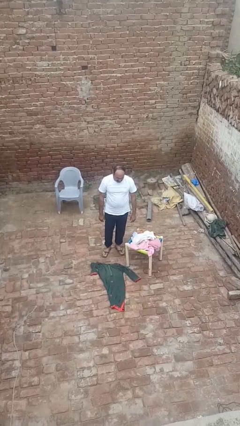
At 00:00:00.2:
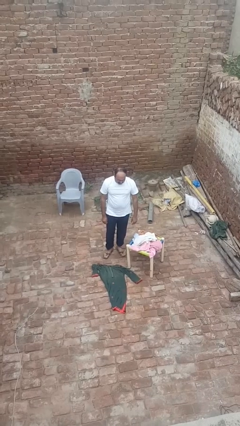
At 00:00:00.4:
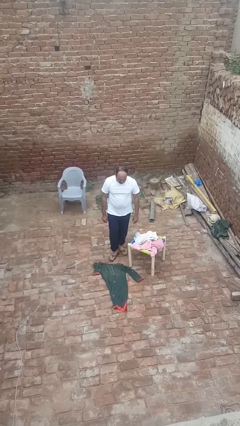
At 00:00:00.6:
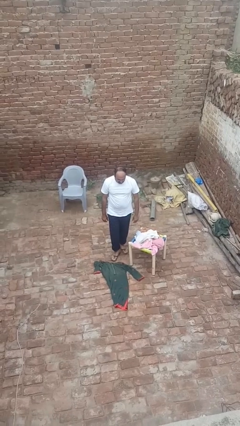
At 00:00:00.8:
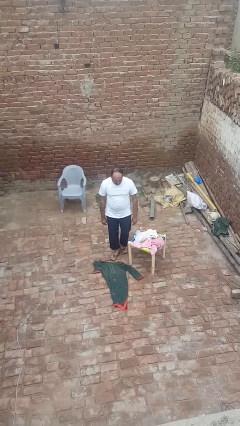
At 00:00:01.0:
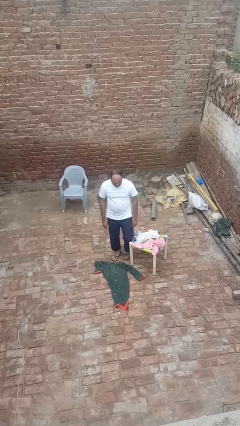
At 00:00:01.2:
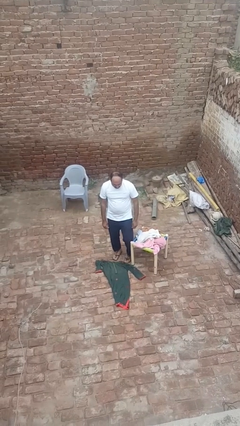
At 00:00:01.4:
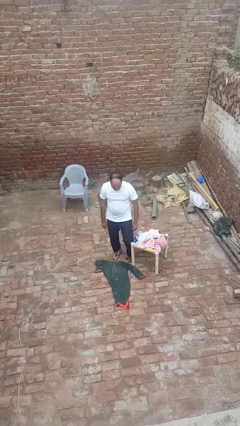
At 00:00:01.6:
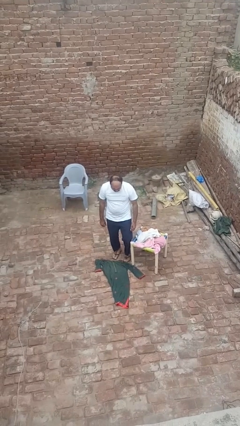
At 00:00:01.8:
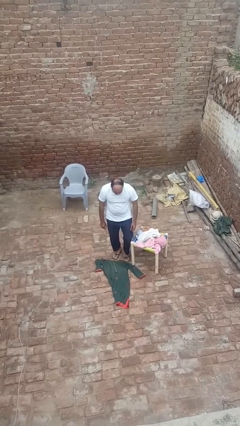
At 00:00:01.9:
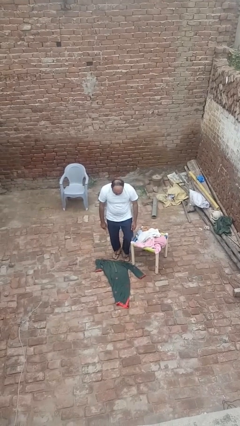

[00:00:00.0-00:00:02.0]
person trips on object on floor

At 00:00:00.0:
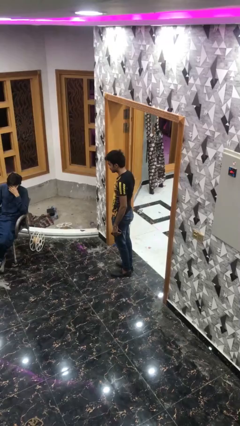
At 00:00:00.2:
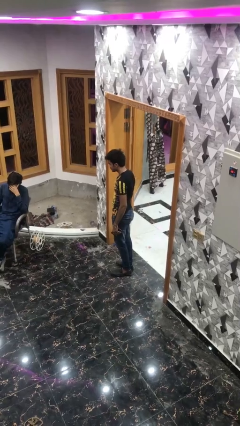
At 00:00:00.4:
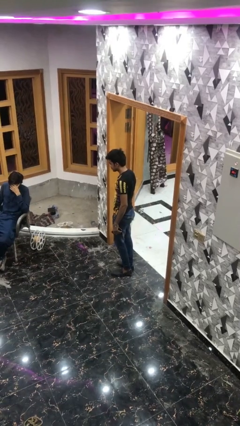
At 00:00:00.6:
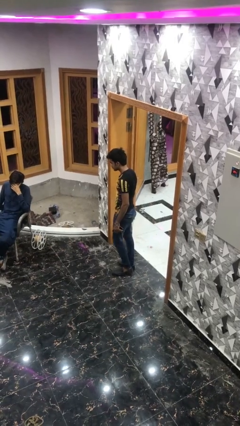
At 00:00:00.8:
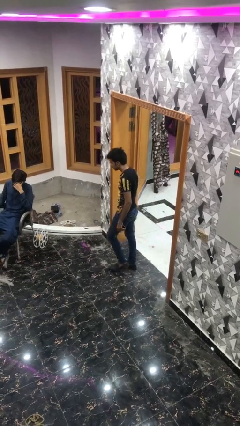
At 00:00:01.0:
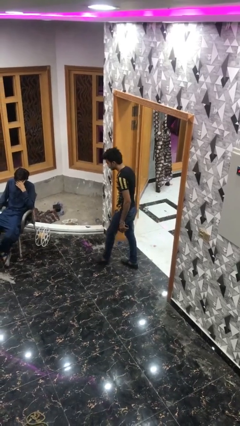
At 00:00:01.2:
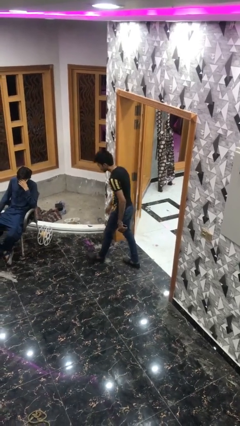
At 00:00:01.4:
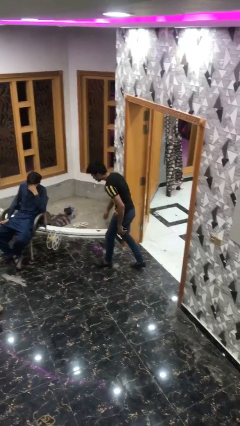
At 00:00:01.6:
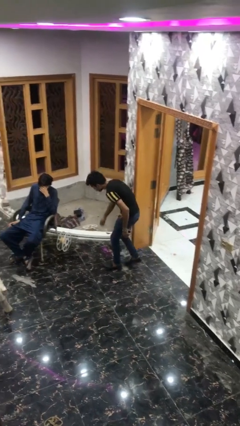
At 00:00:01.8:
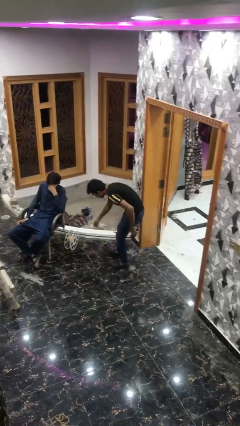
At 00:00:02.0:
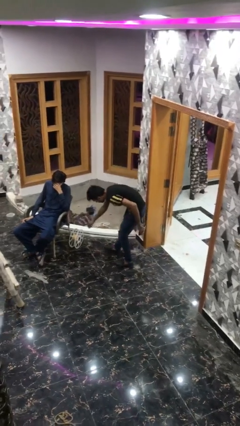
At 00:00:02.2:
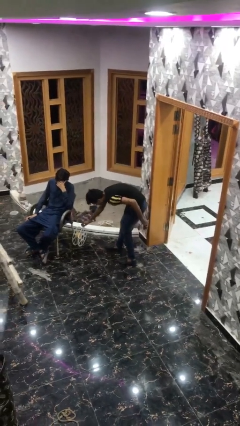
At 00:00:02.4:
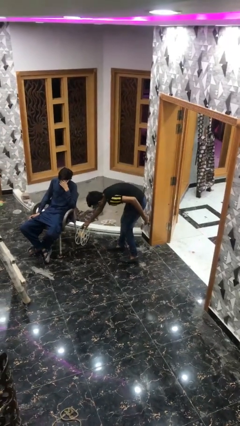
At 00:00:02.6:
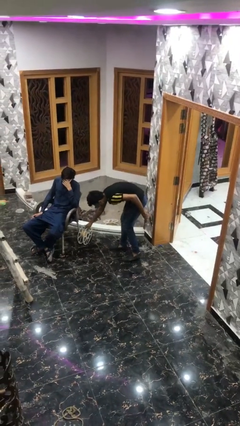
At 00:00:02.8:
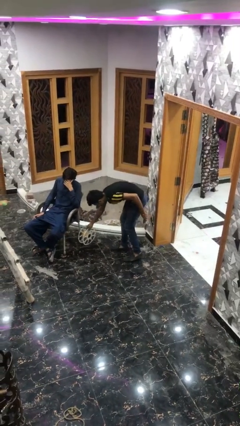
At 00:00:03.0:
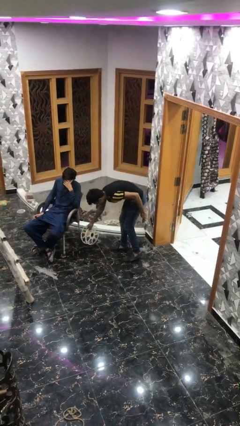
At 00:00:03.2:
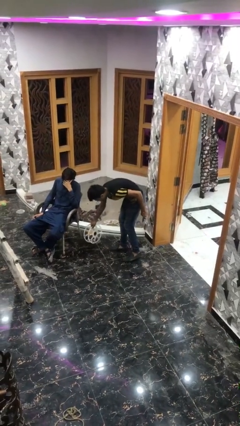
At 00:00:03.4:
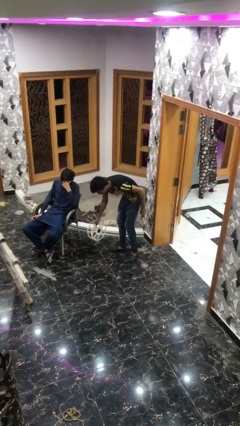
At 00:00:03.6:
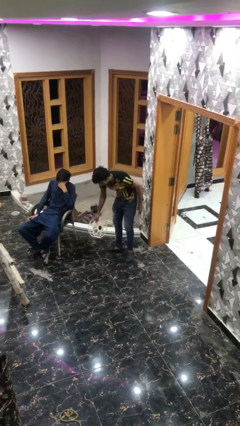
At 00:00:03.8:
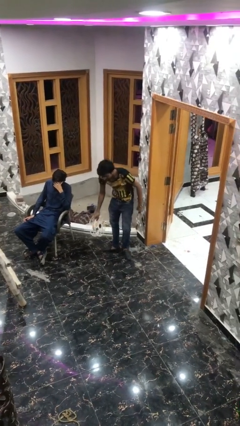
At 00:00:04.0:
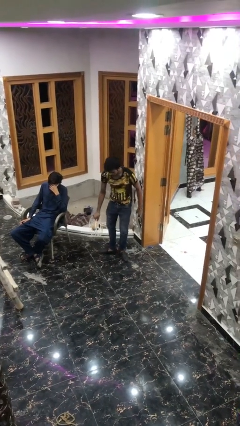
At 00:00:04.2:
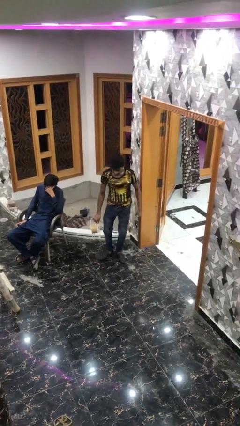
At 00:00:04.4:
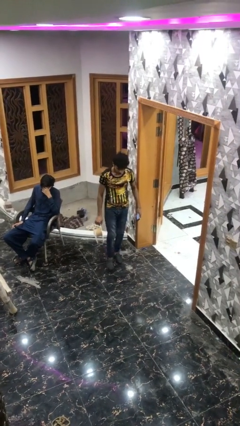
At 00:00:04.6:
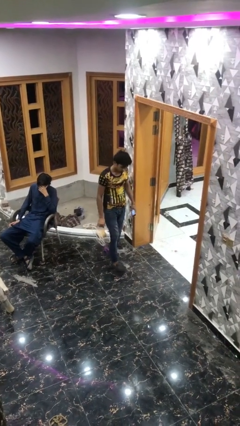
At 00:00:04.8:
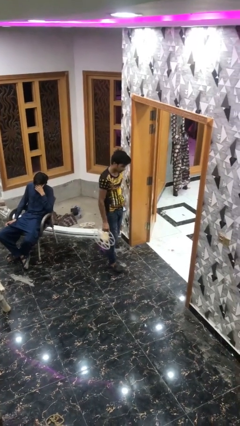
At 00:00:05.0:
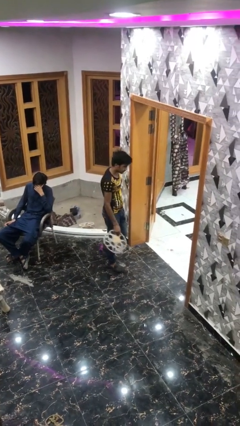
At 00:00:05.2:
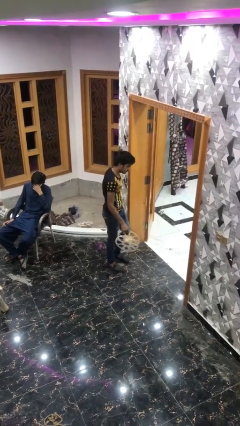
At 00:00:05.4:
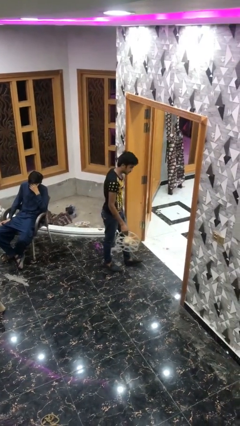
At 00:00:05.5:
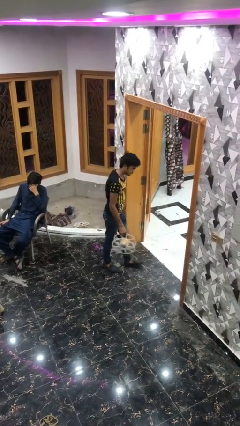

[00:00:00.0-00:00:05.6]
person steals object from person

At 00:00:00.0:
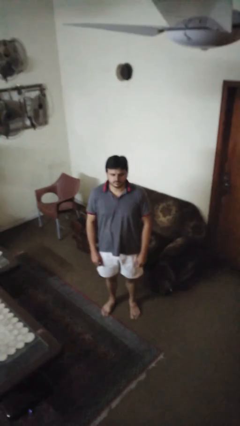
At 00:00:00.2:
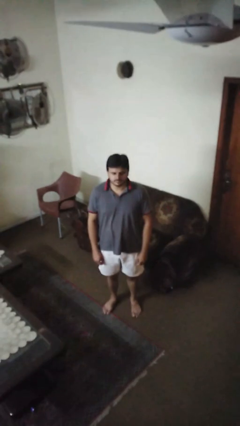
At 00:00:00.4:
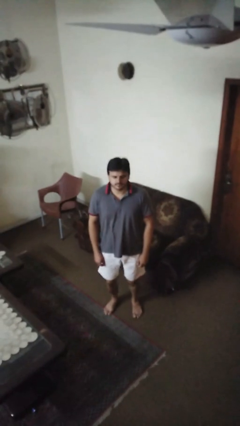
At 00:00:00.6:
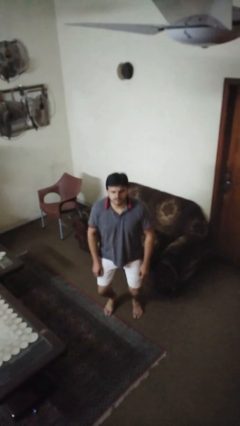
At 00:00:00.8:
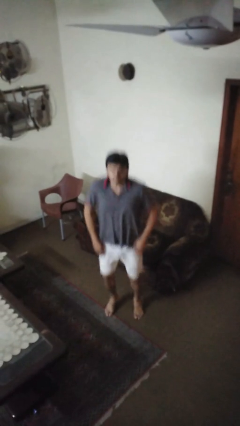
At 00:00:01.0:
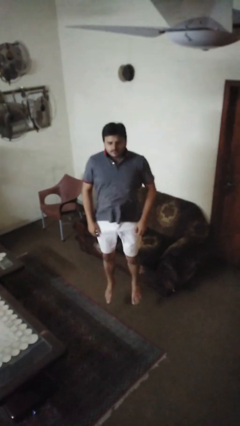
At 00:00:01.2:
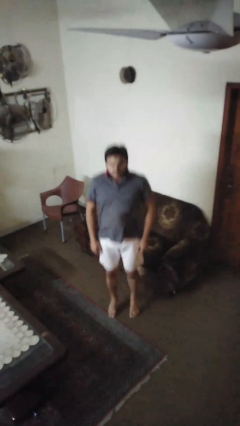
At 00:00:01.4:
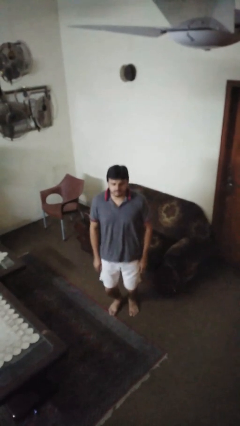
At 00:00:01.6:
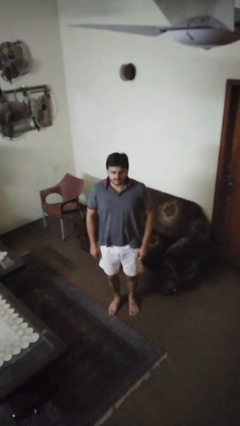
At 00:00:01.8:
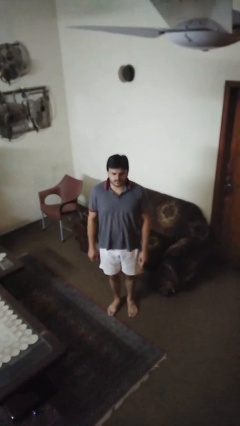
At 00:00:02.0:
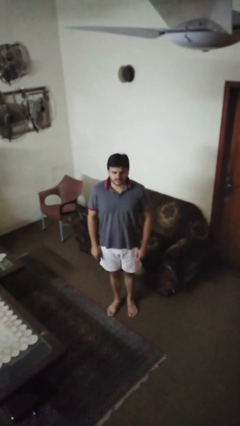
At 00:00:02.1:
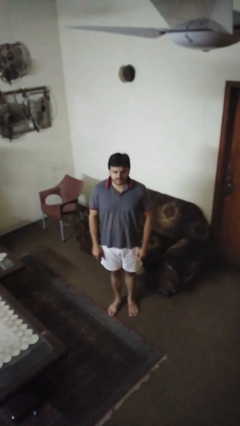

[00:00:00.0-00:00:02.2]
person jumps

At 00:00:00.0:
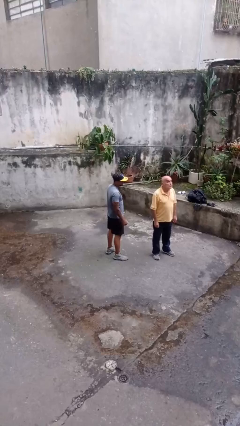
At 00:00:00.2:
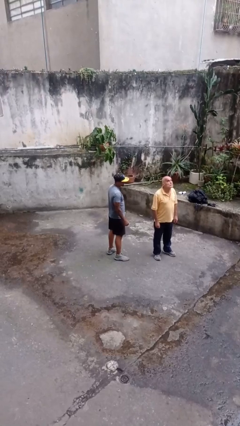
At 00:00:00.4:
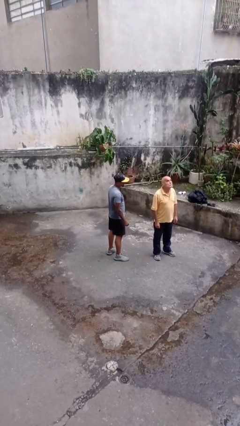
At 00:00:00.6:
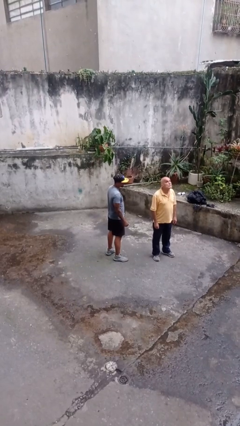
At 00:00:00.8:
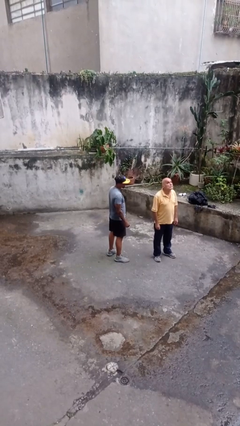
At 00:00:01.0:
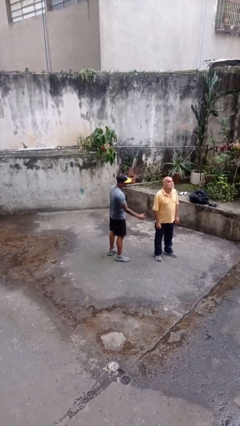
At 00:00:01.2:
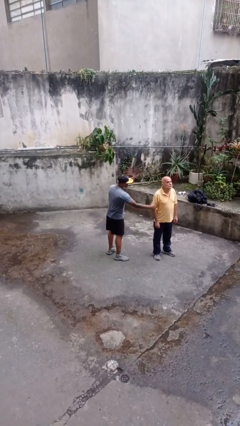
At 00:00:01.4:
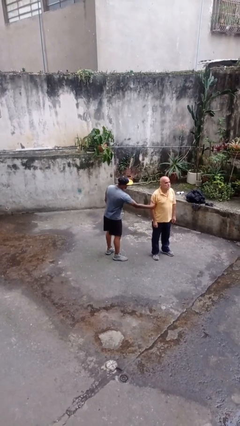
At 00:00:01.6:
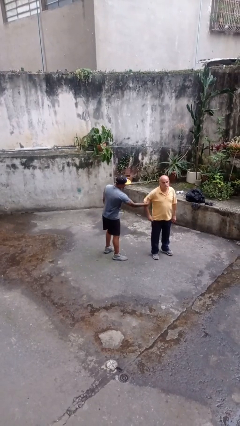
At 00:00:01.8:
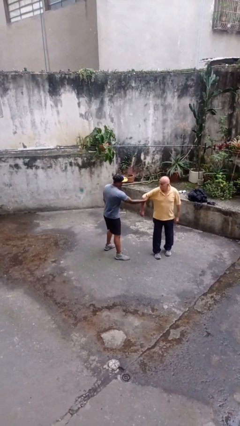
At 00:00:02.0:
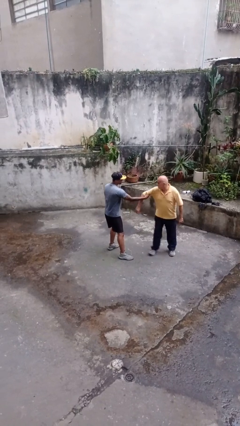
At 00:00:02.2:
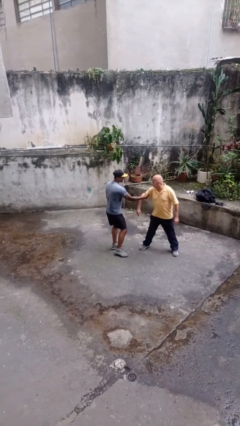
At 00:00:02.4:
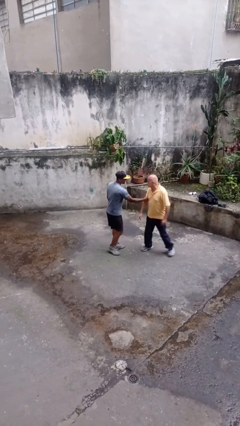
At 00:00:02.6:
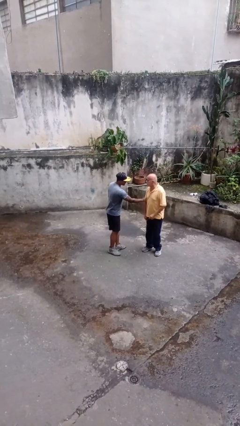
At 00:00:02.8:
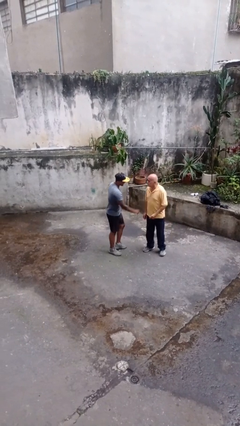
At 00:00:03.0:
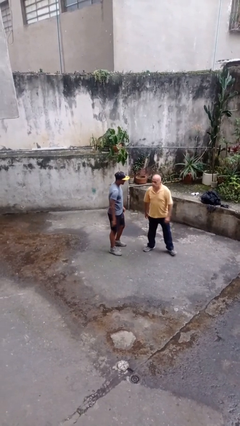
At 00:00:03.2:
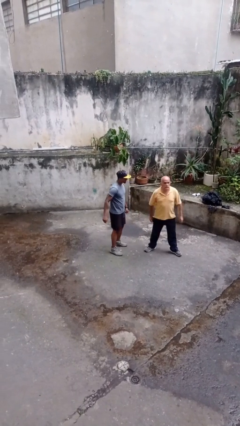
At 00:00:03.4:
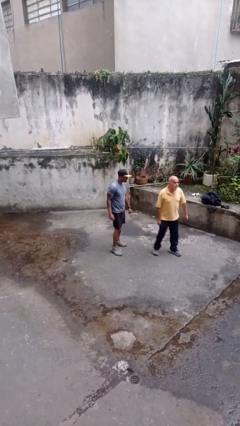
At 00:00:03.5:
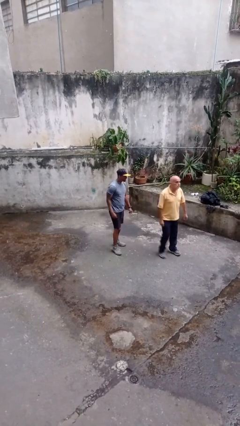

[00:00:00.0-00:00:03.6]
person grabs person by bicep

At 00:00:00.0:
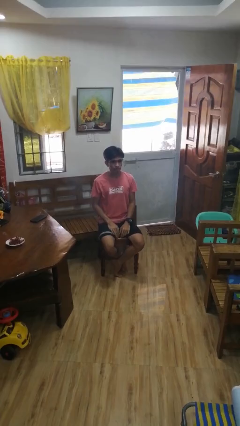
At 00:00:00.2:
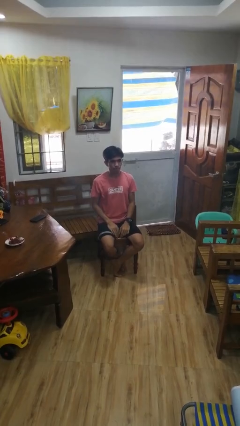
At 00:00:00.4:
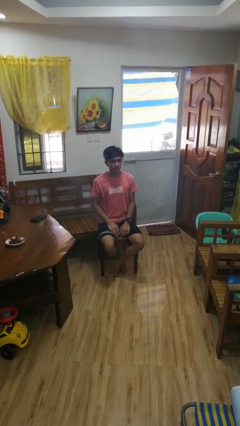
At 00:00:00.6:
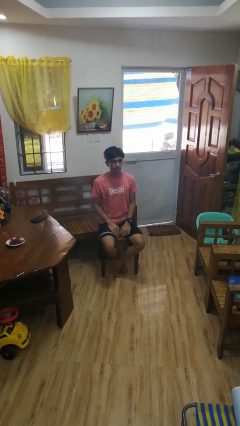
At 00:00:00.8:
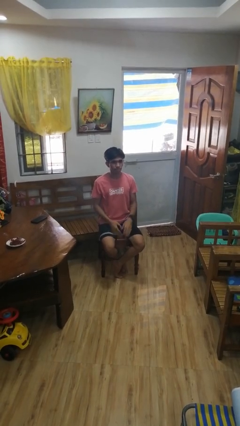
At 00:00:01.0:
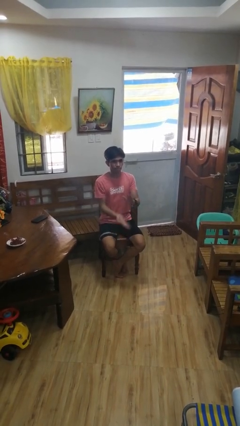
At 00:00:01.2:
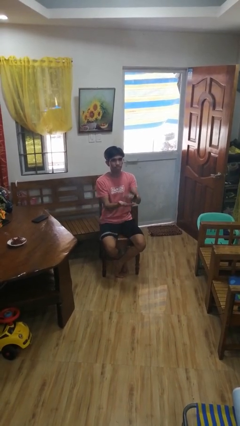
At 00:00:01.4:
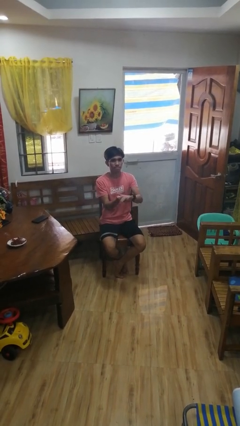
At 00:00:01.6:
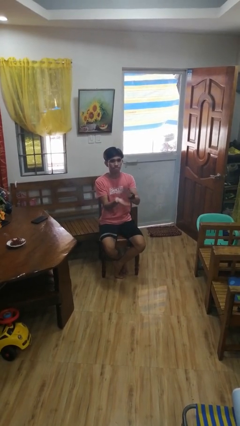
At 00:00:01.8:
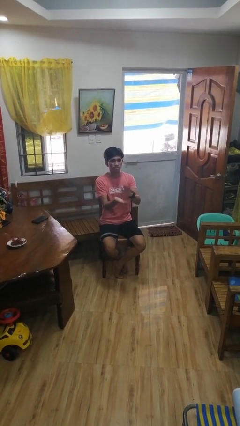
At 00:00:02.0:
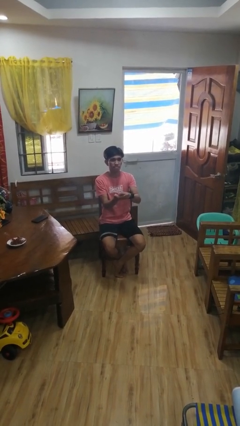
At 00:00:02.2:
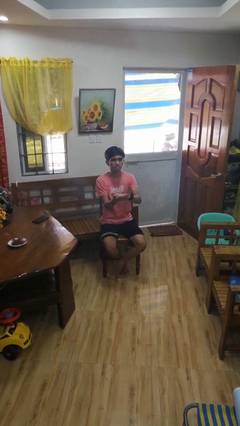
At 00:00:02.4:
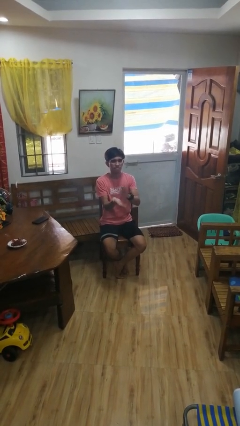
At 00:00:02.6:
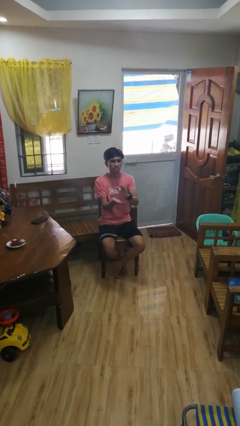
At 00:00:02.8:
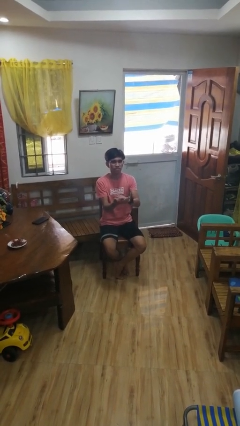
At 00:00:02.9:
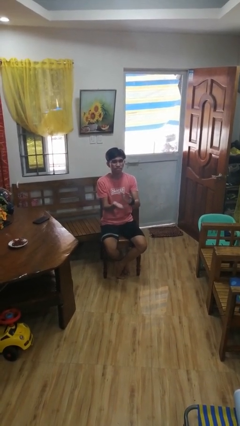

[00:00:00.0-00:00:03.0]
person claps hands

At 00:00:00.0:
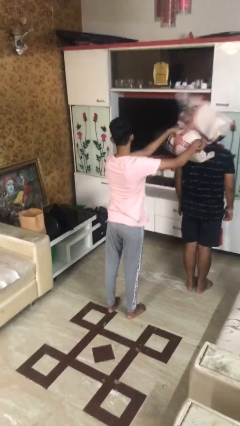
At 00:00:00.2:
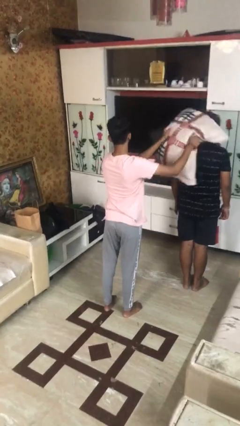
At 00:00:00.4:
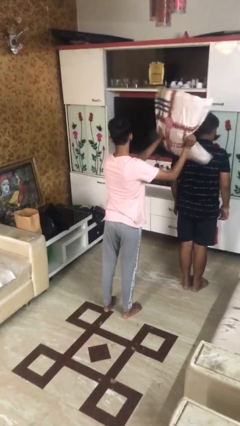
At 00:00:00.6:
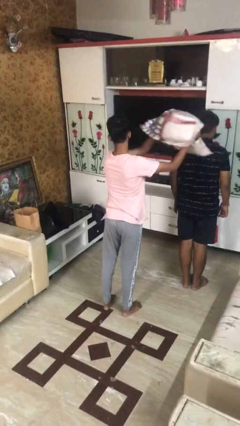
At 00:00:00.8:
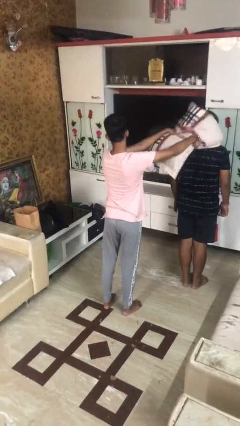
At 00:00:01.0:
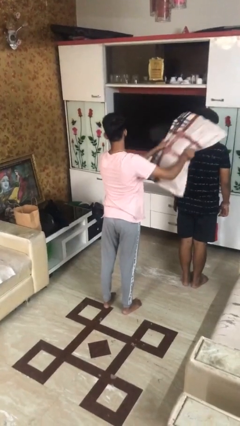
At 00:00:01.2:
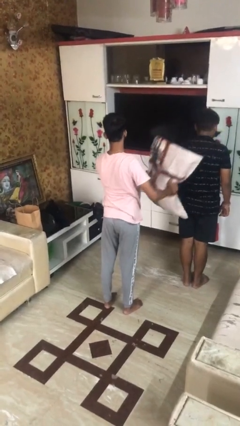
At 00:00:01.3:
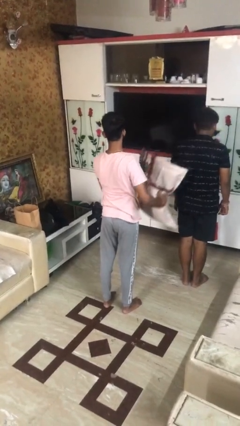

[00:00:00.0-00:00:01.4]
person hits person with pillow
